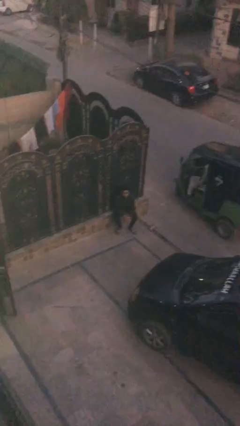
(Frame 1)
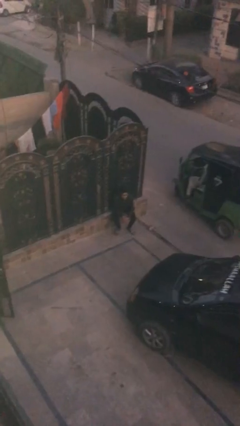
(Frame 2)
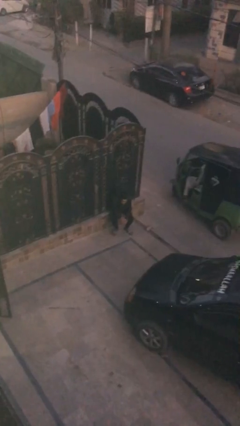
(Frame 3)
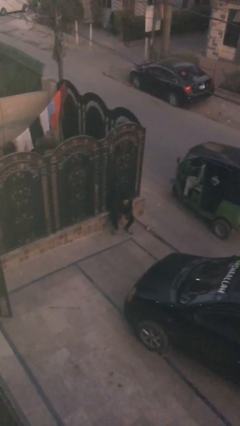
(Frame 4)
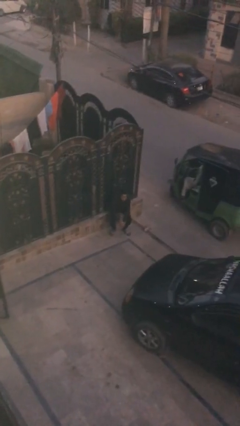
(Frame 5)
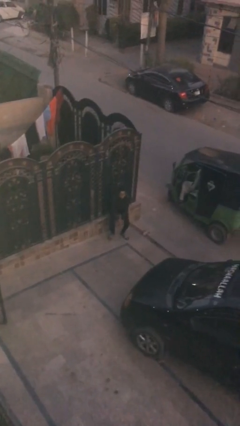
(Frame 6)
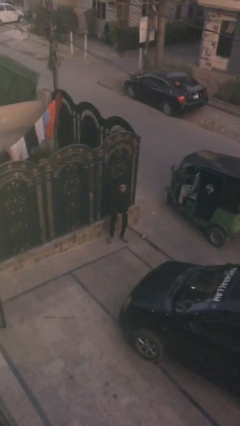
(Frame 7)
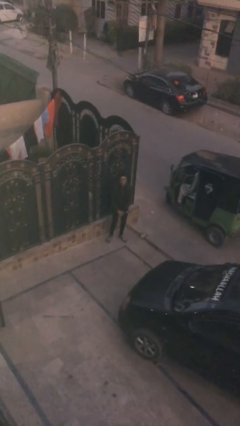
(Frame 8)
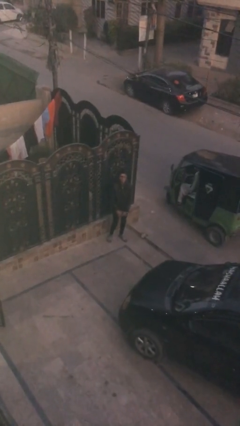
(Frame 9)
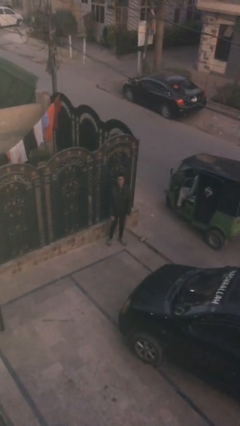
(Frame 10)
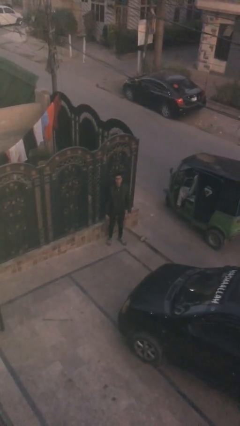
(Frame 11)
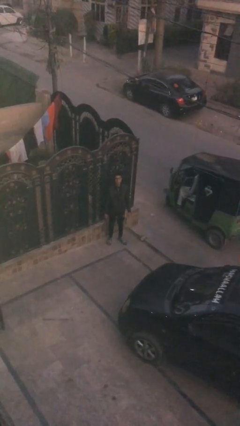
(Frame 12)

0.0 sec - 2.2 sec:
person stands up

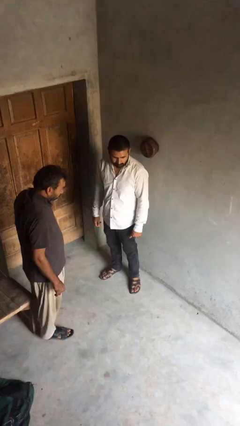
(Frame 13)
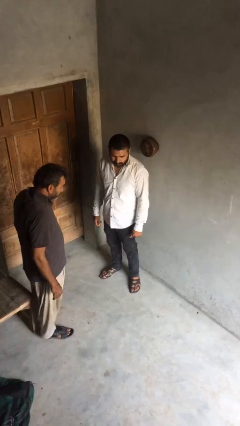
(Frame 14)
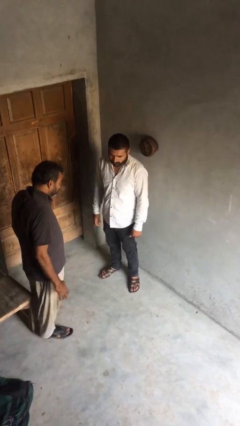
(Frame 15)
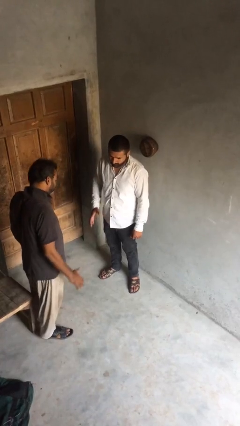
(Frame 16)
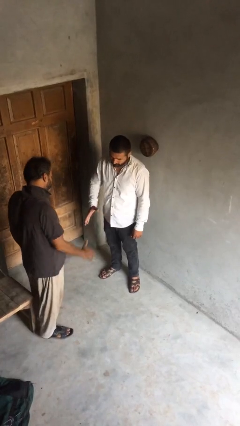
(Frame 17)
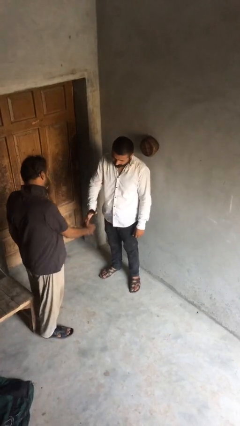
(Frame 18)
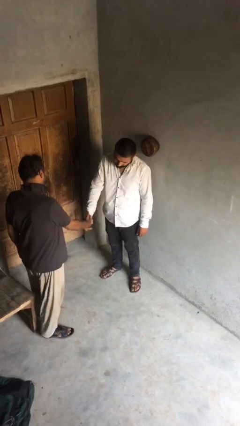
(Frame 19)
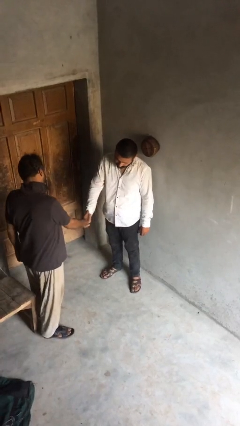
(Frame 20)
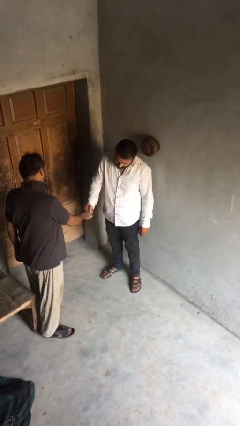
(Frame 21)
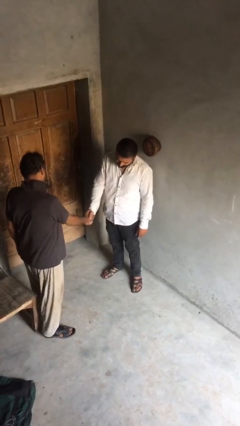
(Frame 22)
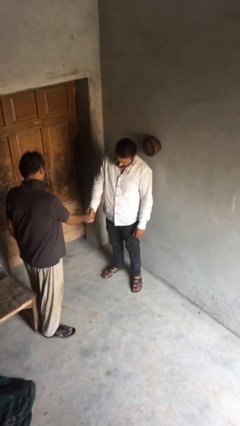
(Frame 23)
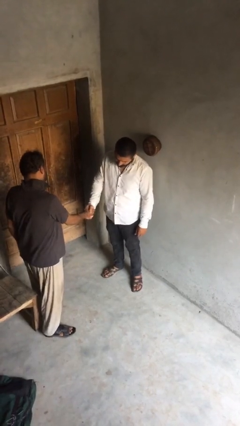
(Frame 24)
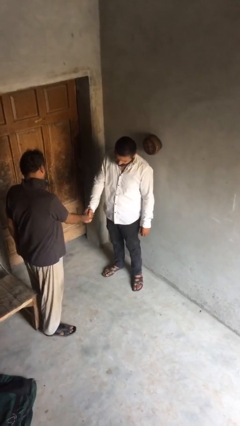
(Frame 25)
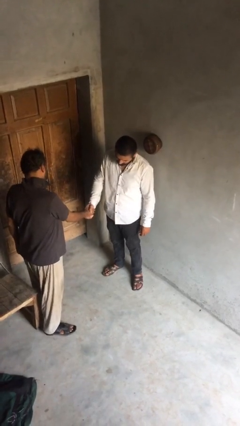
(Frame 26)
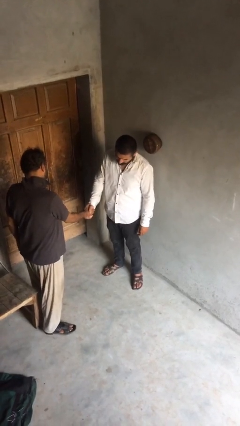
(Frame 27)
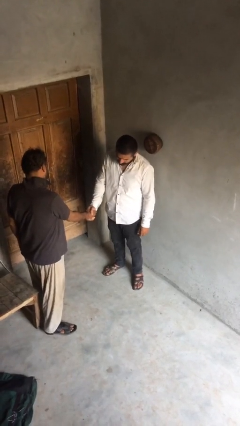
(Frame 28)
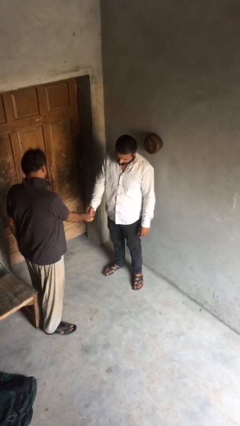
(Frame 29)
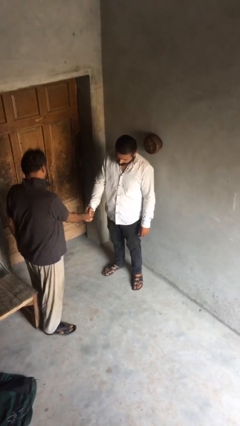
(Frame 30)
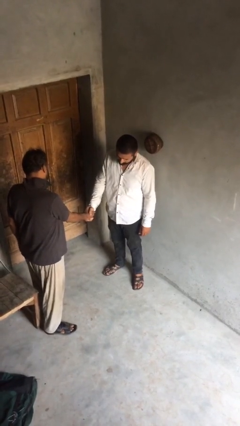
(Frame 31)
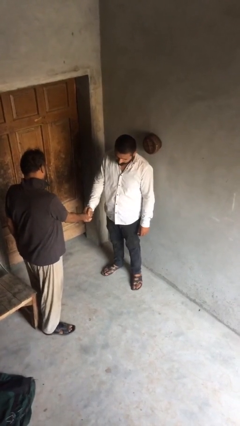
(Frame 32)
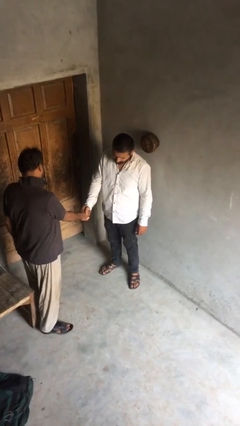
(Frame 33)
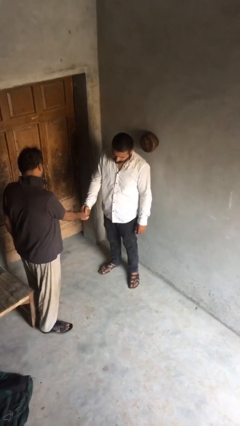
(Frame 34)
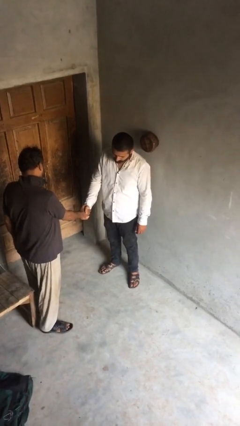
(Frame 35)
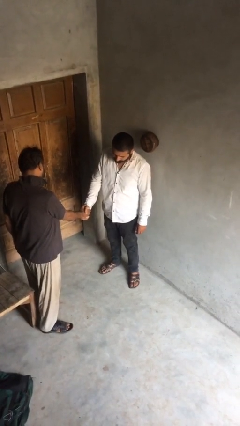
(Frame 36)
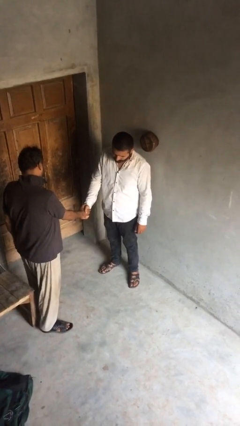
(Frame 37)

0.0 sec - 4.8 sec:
person shakes hand

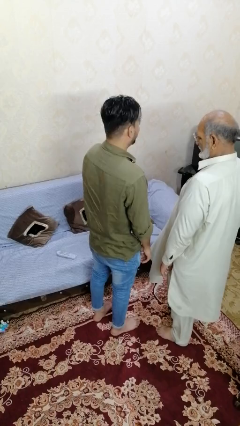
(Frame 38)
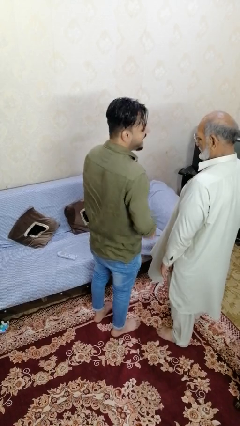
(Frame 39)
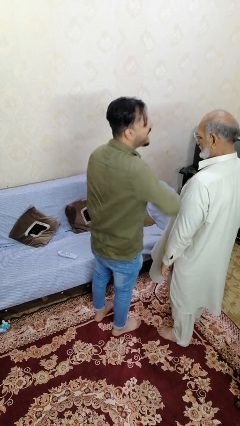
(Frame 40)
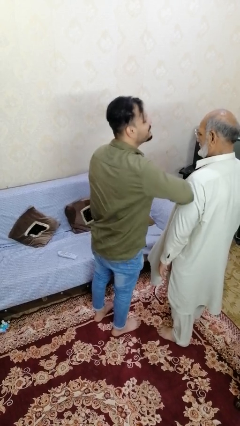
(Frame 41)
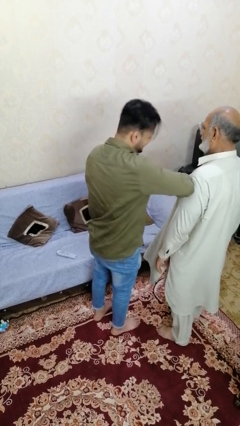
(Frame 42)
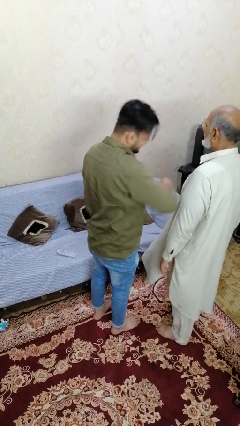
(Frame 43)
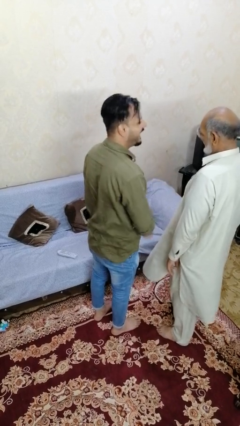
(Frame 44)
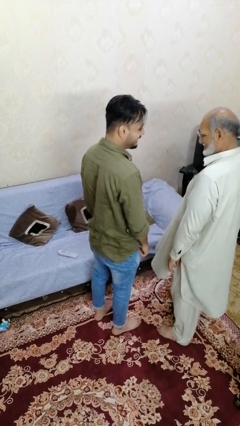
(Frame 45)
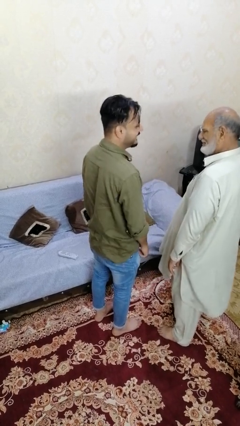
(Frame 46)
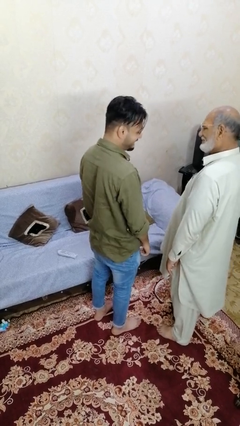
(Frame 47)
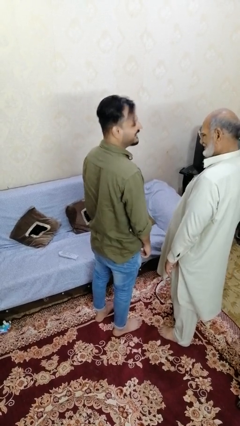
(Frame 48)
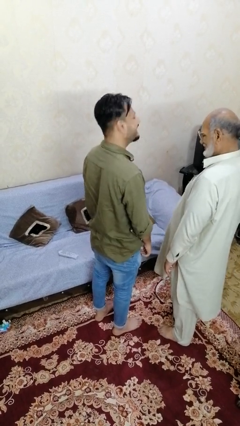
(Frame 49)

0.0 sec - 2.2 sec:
person nudges person with elbow

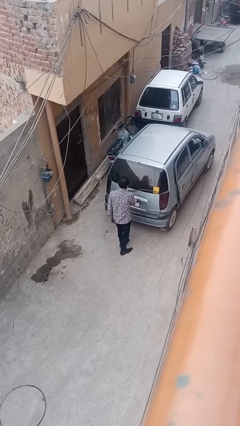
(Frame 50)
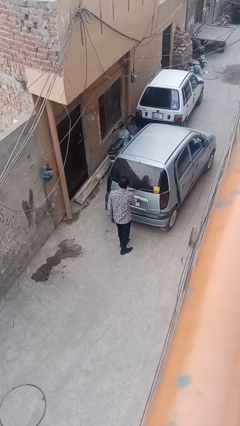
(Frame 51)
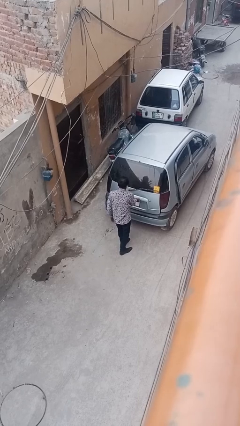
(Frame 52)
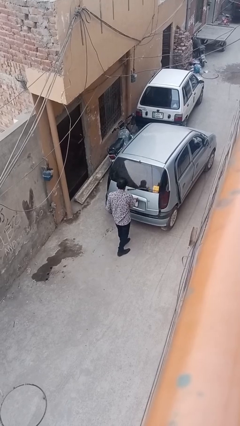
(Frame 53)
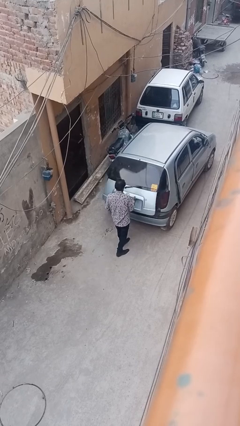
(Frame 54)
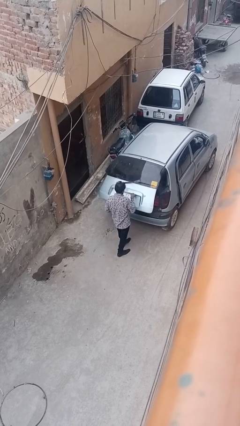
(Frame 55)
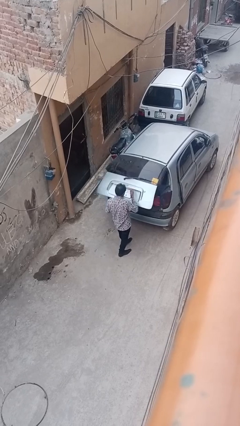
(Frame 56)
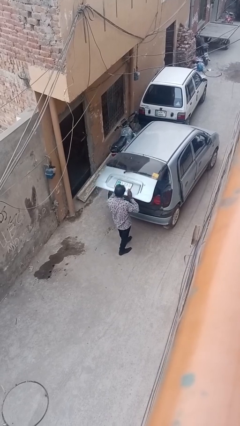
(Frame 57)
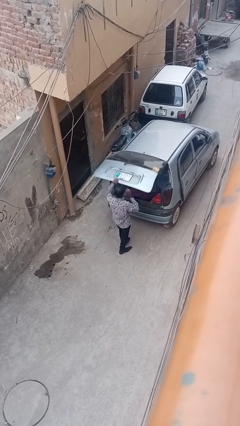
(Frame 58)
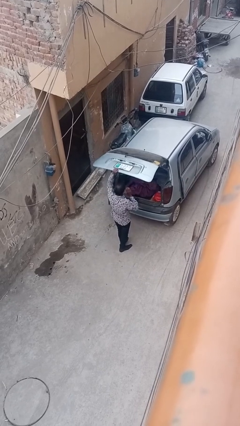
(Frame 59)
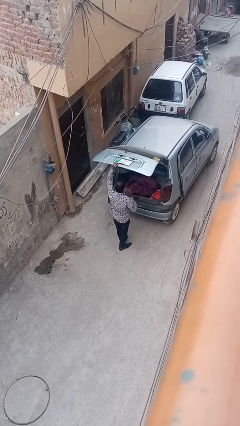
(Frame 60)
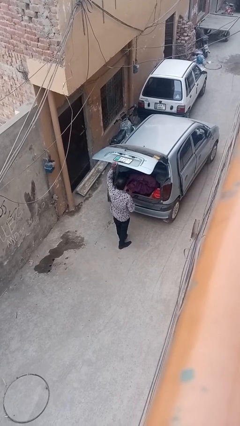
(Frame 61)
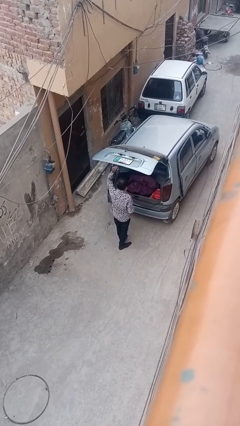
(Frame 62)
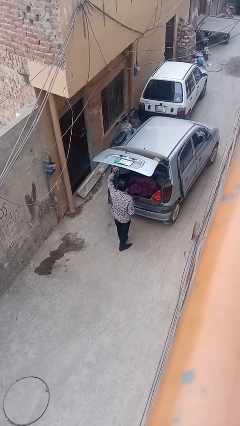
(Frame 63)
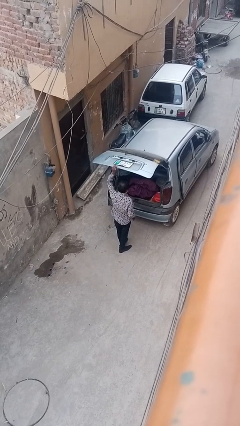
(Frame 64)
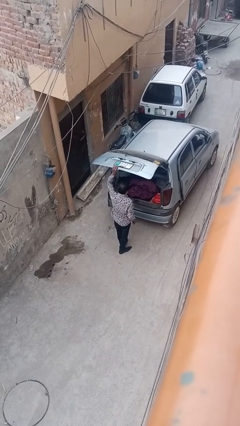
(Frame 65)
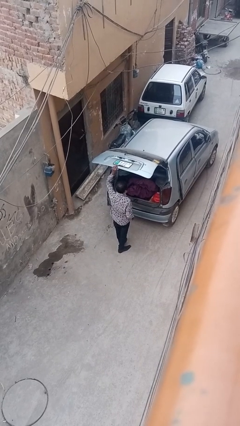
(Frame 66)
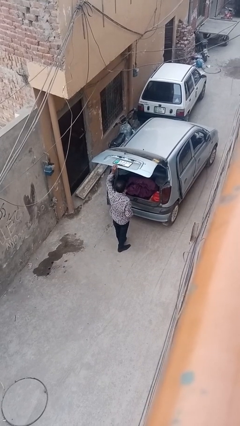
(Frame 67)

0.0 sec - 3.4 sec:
person opens car trunk

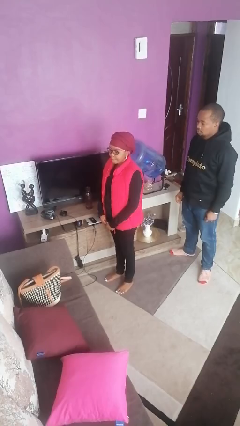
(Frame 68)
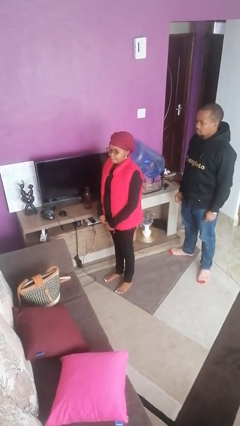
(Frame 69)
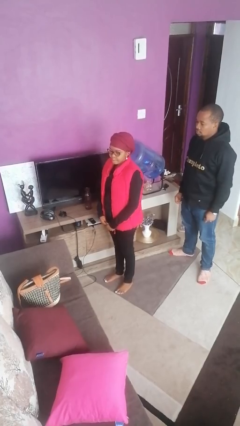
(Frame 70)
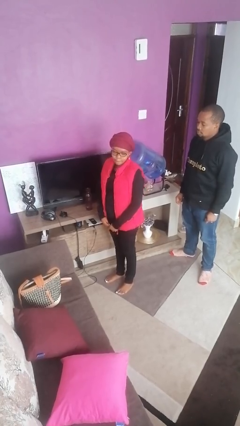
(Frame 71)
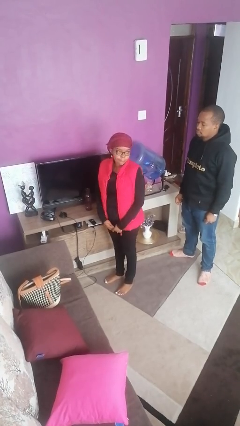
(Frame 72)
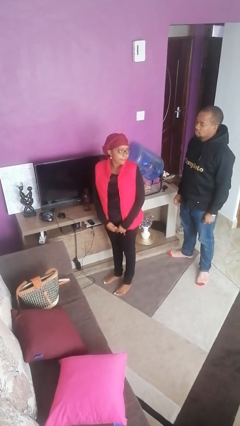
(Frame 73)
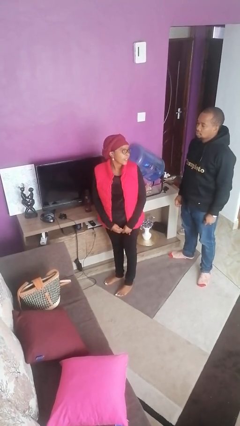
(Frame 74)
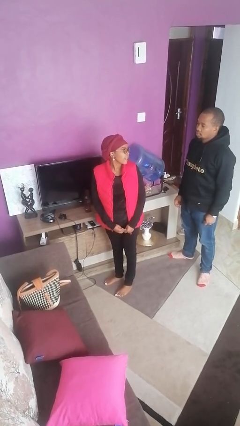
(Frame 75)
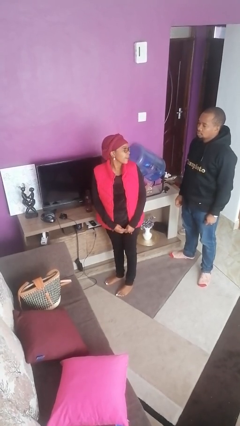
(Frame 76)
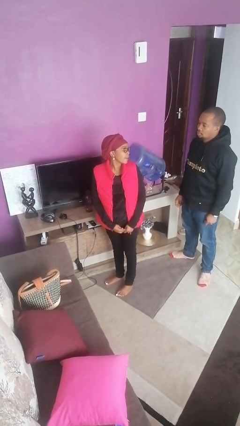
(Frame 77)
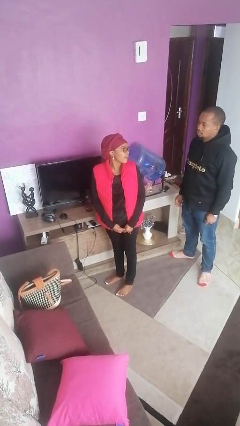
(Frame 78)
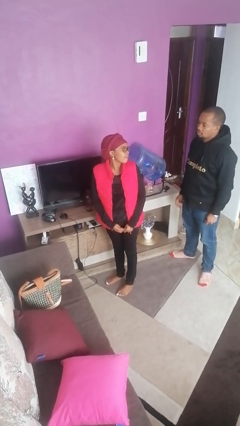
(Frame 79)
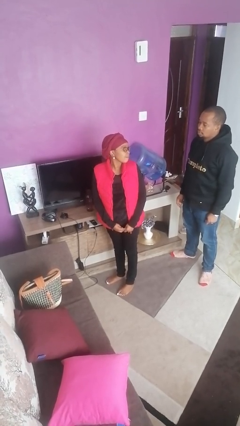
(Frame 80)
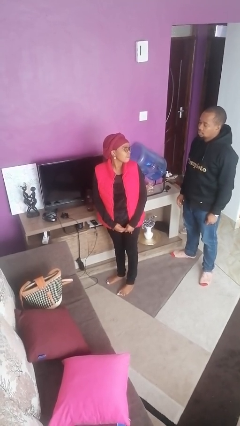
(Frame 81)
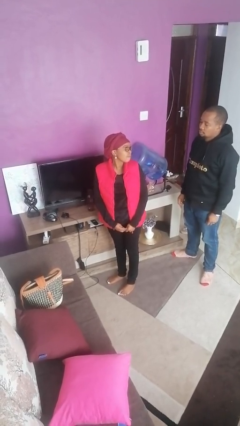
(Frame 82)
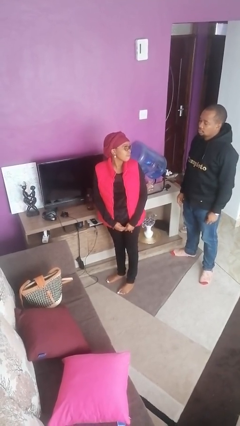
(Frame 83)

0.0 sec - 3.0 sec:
person looks over shoulder

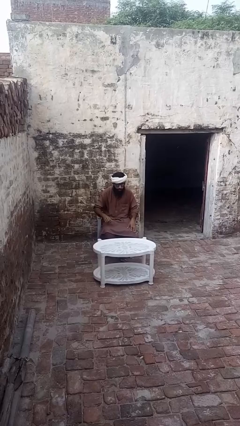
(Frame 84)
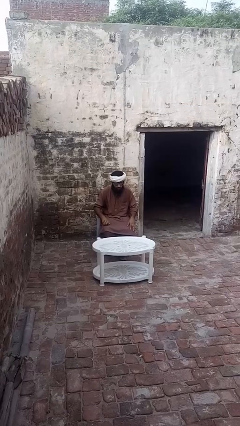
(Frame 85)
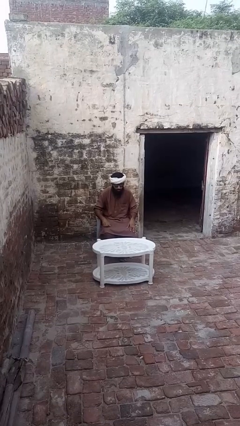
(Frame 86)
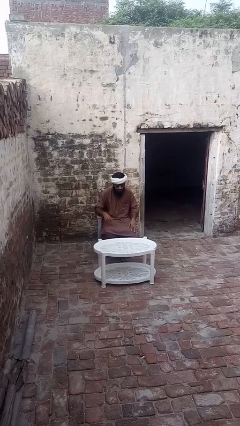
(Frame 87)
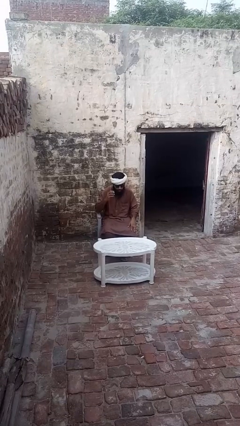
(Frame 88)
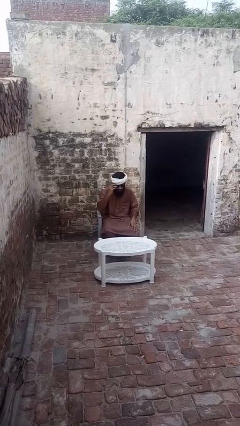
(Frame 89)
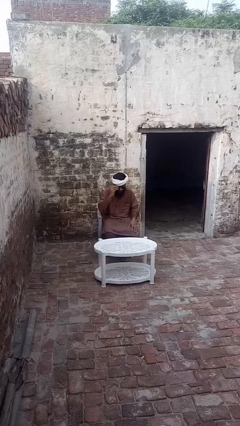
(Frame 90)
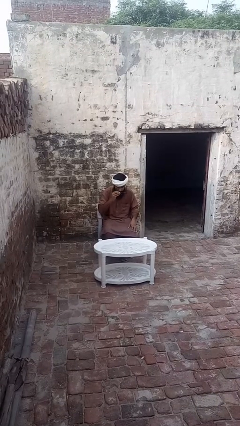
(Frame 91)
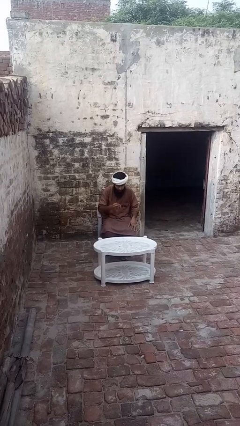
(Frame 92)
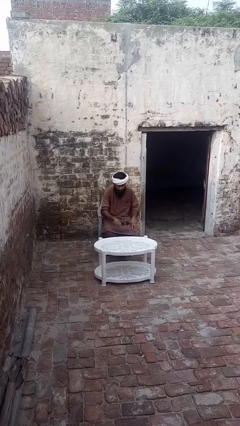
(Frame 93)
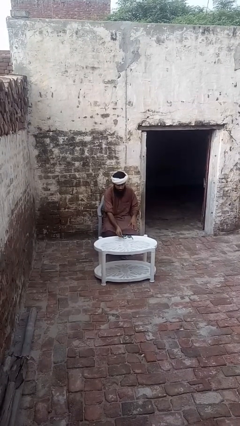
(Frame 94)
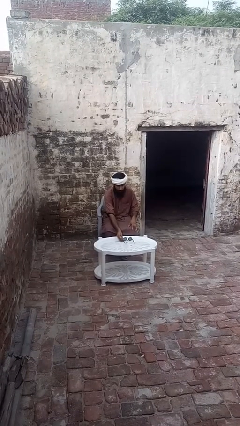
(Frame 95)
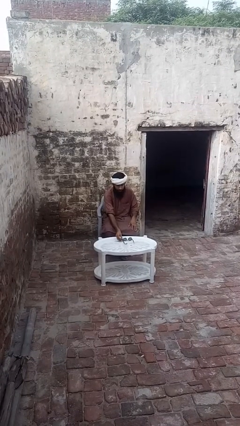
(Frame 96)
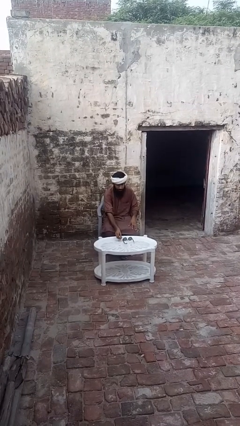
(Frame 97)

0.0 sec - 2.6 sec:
person takes off sunglasses
